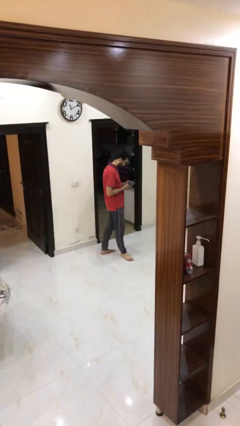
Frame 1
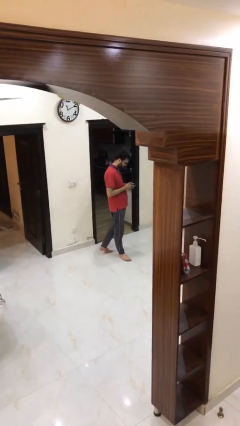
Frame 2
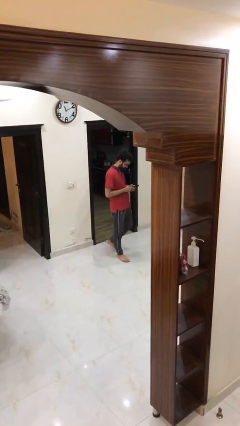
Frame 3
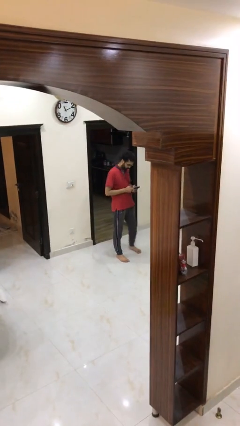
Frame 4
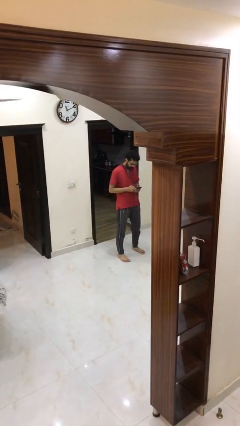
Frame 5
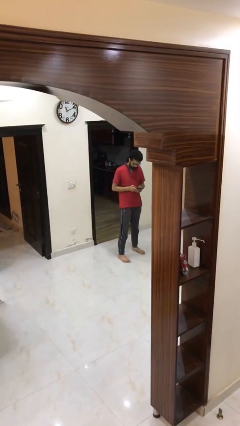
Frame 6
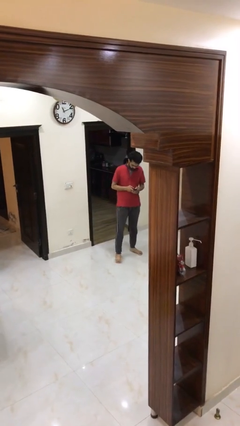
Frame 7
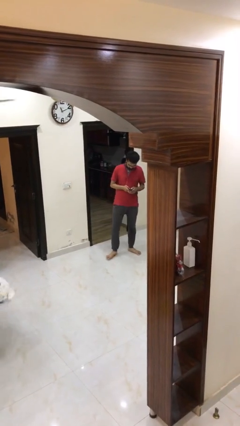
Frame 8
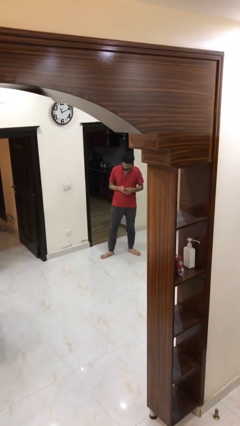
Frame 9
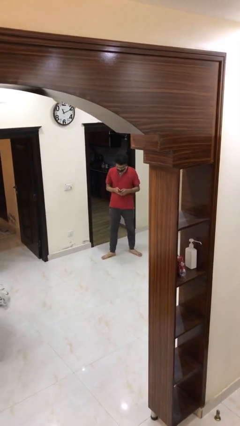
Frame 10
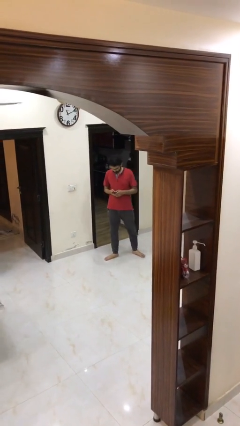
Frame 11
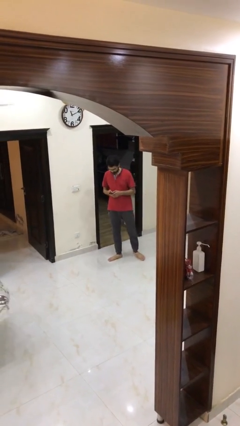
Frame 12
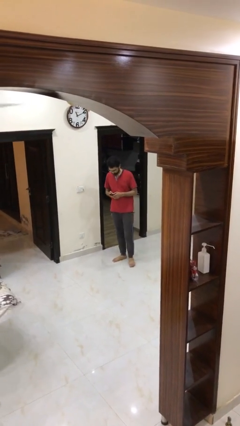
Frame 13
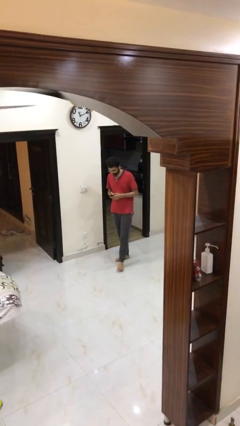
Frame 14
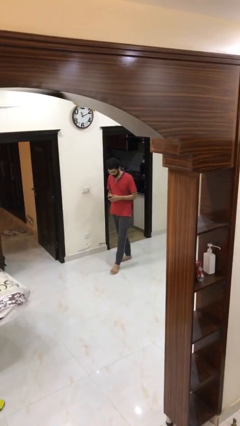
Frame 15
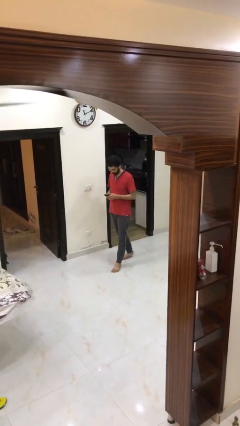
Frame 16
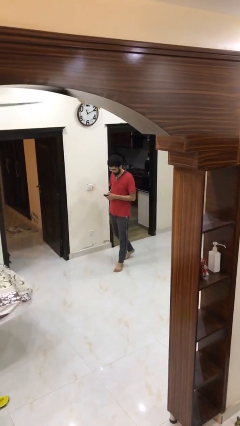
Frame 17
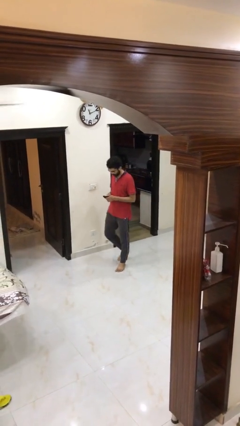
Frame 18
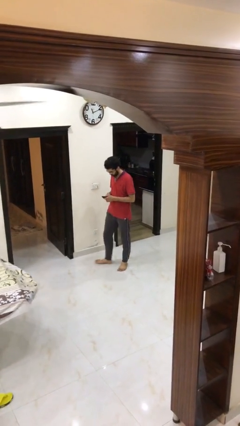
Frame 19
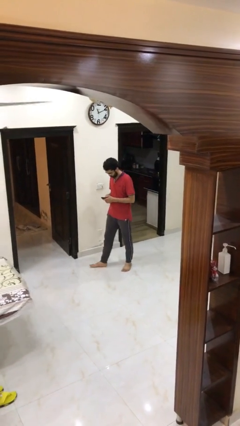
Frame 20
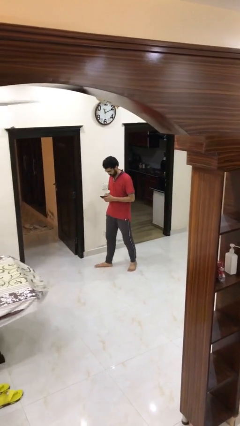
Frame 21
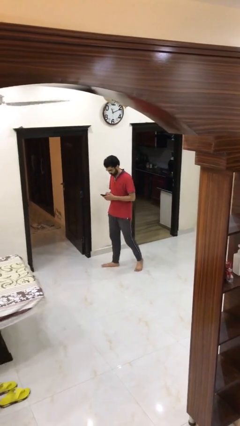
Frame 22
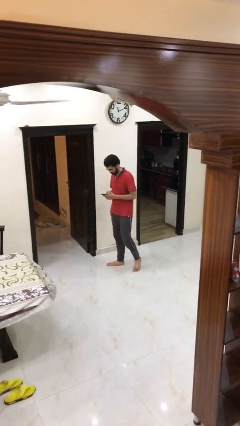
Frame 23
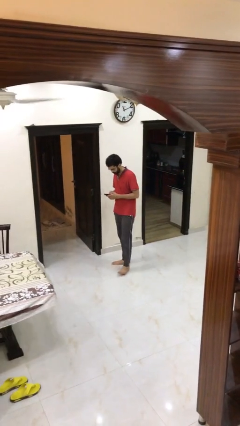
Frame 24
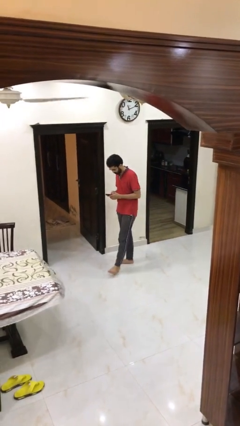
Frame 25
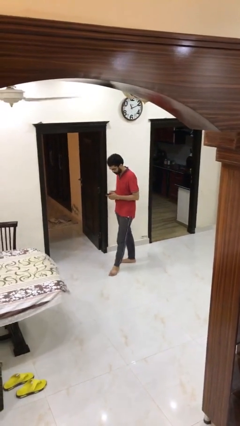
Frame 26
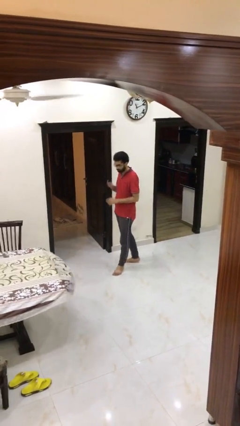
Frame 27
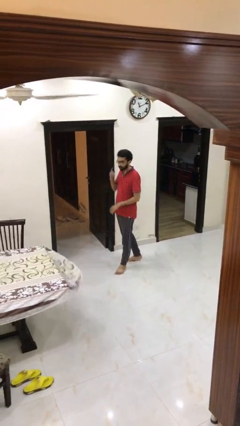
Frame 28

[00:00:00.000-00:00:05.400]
person texts on phone

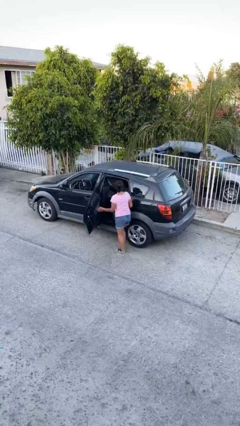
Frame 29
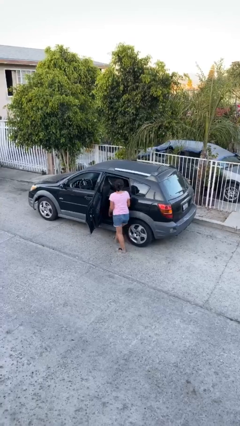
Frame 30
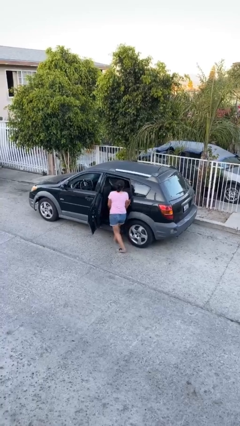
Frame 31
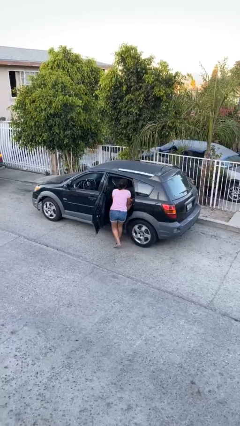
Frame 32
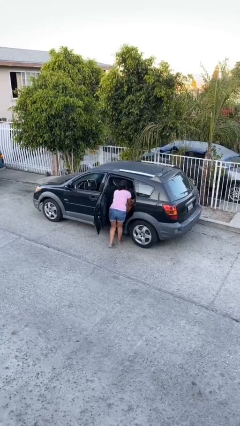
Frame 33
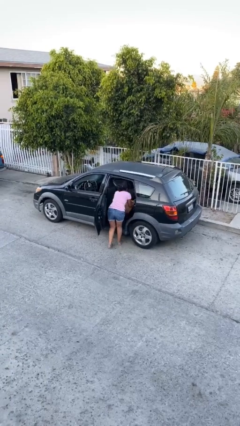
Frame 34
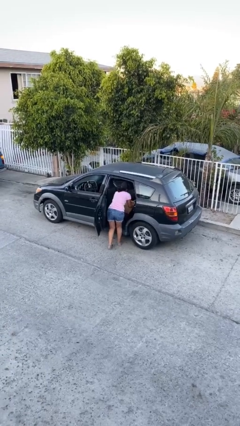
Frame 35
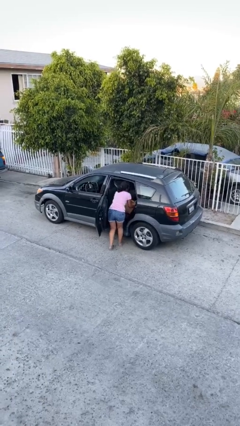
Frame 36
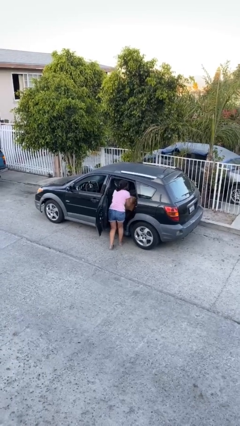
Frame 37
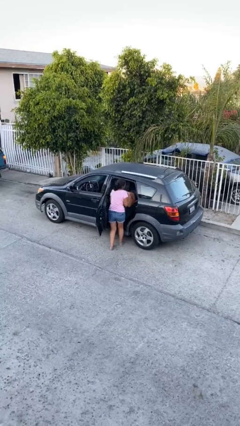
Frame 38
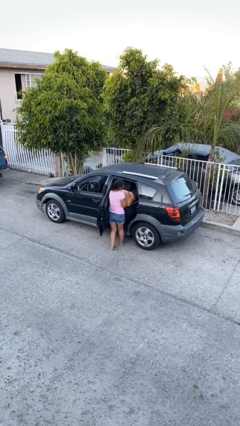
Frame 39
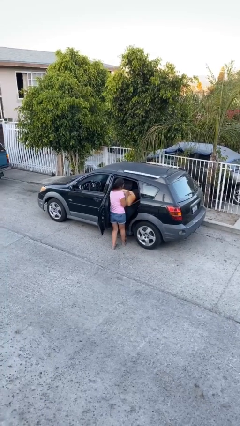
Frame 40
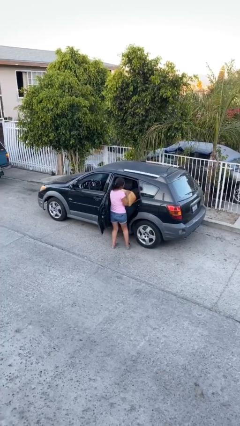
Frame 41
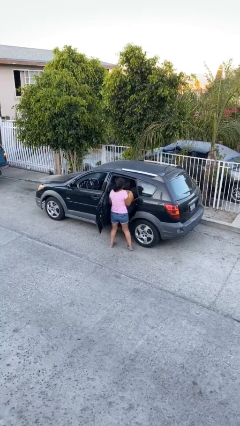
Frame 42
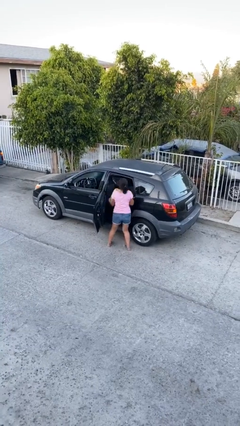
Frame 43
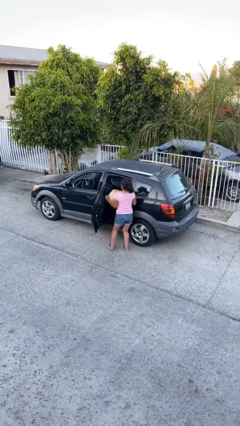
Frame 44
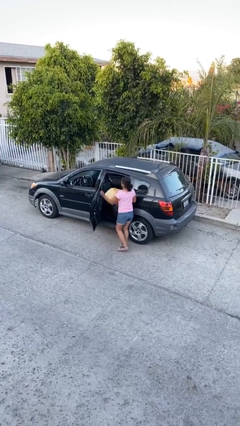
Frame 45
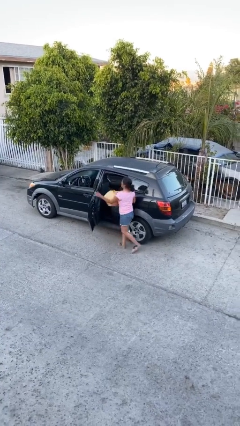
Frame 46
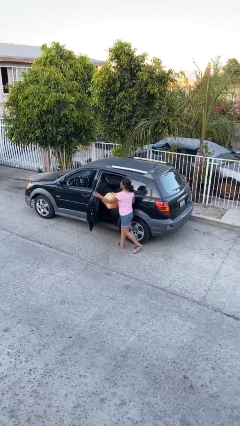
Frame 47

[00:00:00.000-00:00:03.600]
person unloads car

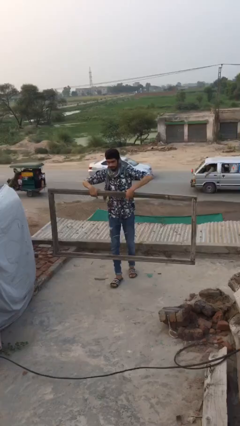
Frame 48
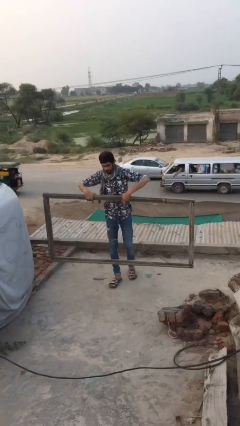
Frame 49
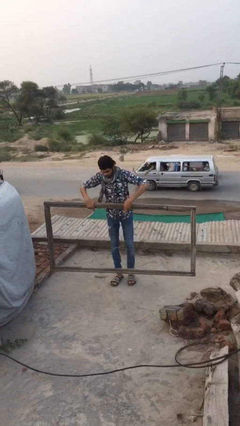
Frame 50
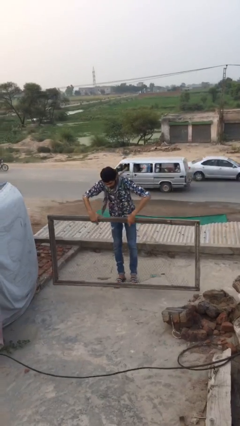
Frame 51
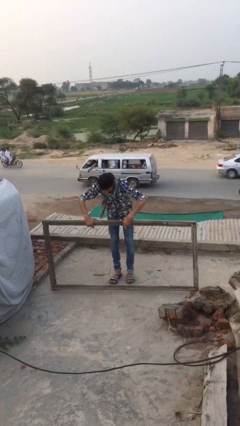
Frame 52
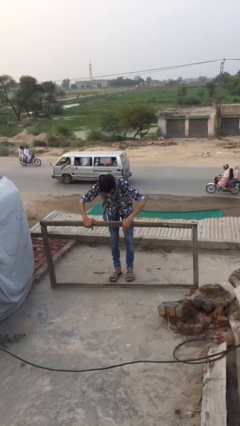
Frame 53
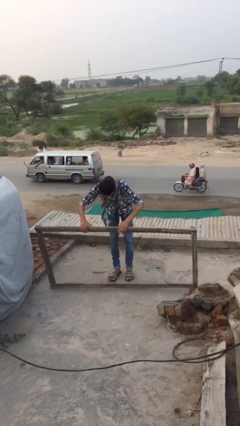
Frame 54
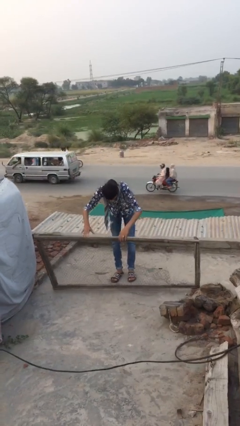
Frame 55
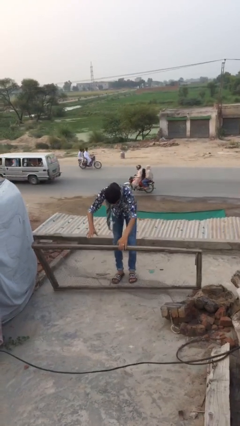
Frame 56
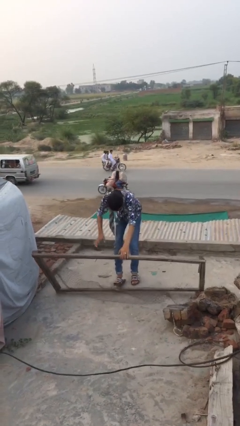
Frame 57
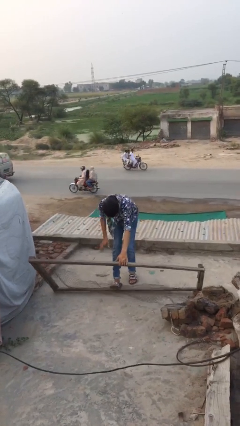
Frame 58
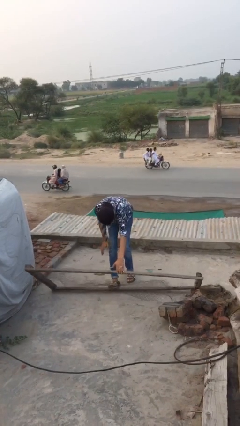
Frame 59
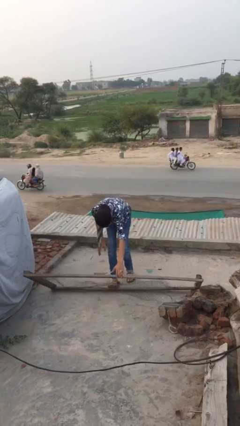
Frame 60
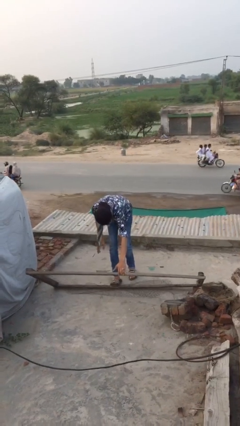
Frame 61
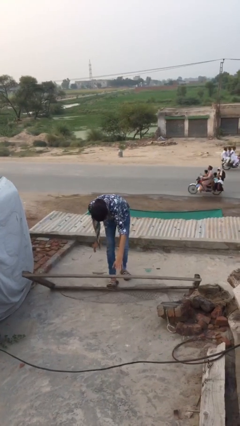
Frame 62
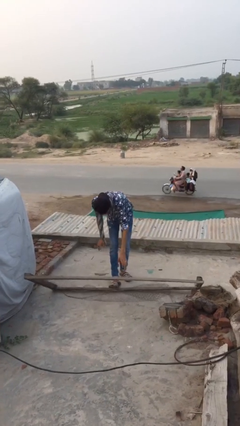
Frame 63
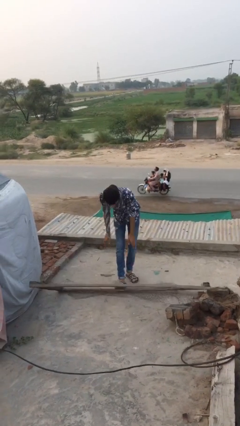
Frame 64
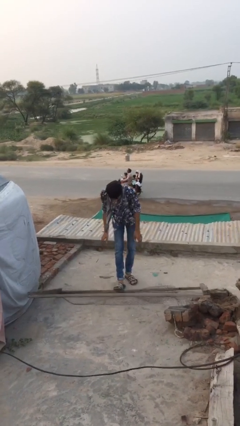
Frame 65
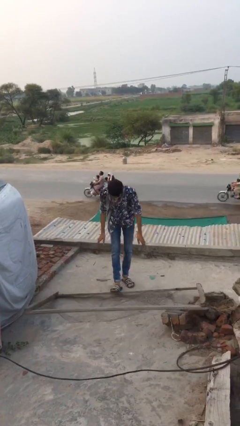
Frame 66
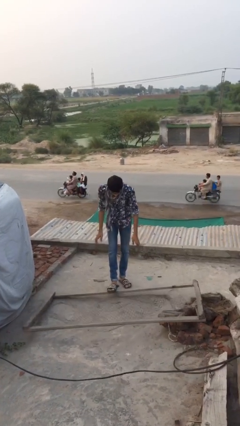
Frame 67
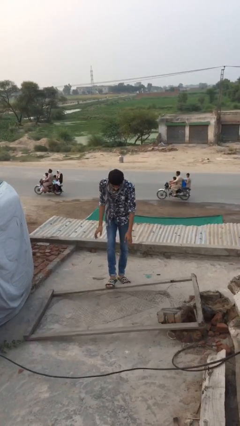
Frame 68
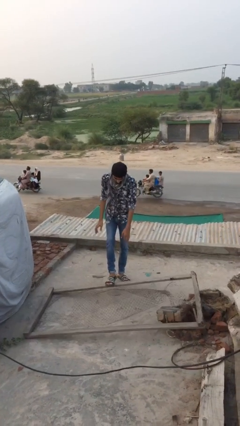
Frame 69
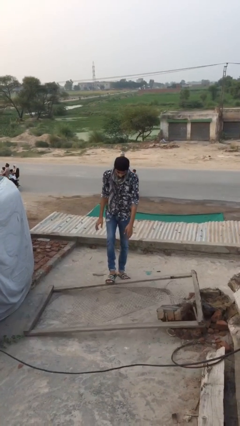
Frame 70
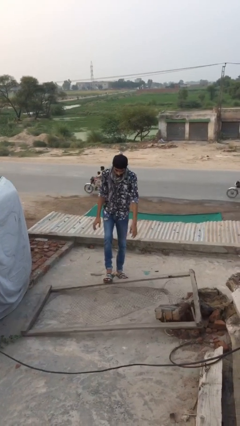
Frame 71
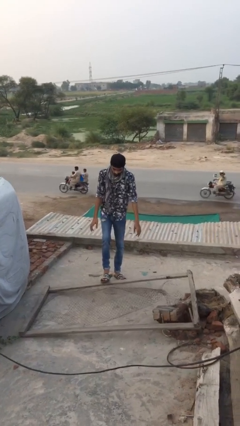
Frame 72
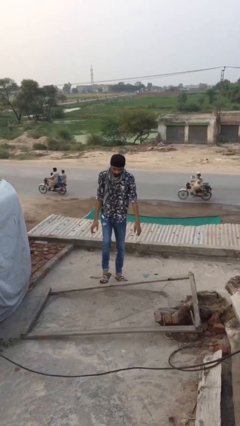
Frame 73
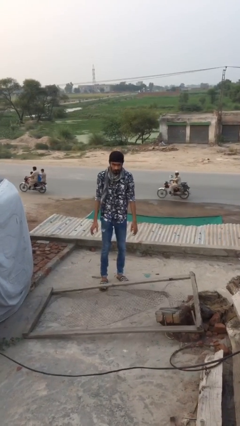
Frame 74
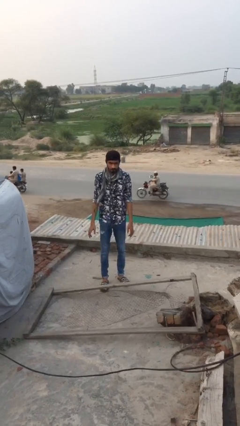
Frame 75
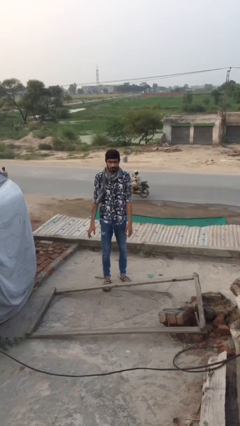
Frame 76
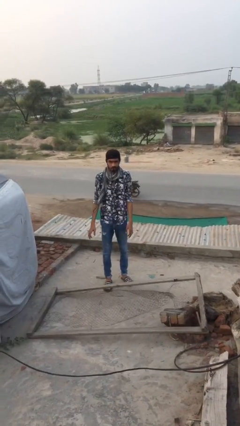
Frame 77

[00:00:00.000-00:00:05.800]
person puts down object on floor

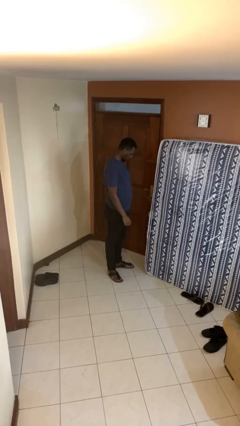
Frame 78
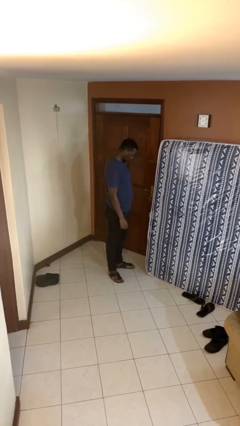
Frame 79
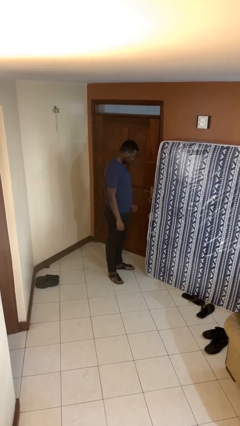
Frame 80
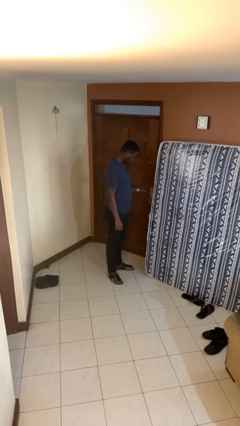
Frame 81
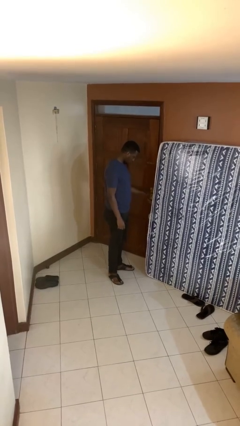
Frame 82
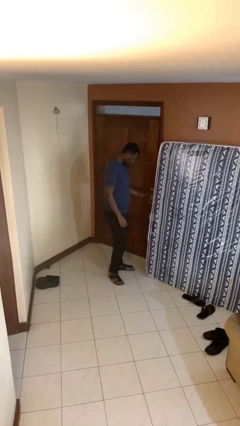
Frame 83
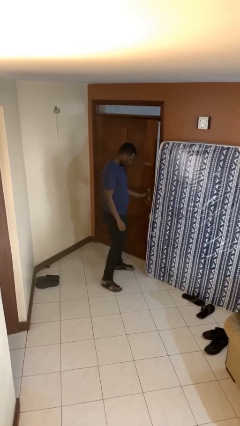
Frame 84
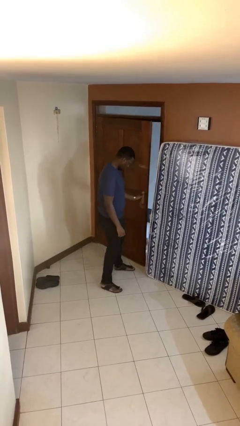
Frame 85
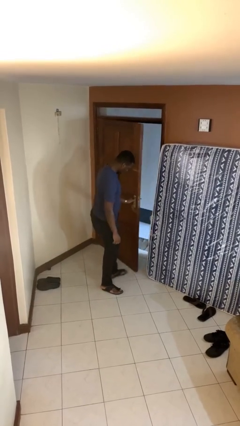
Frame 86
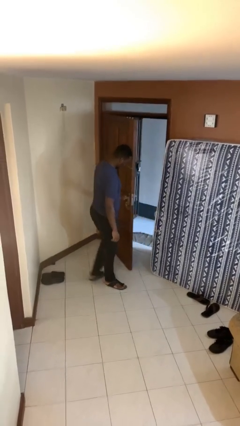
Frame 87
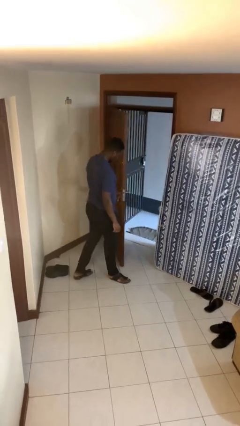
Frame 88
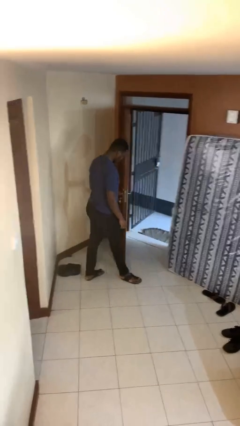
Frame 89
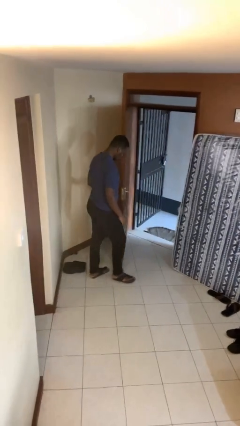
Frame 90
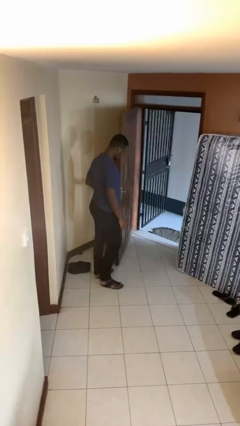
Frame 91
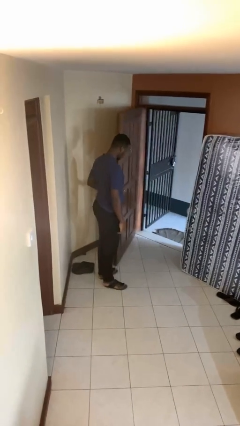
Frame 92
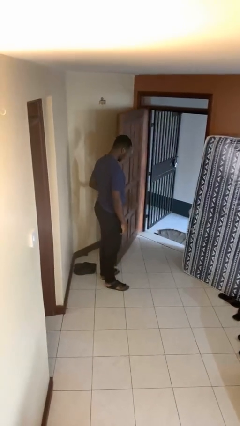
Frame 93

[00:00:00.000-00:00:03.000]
person opens facility door
